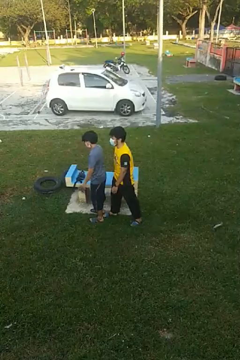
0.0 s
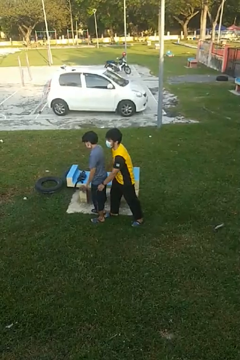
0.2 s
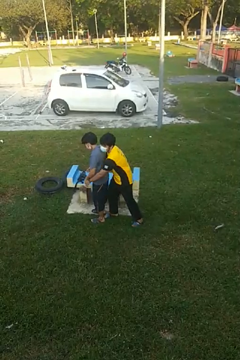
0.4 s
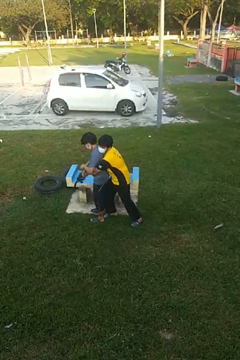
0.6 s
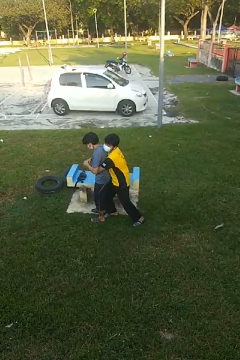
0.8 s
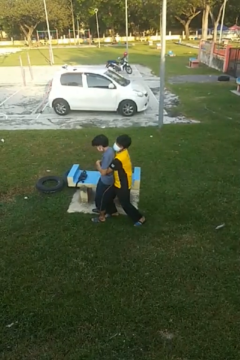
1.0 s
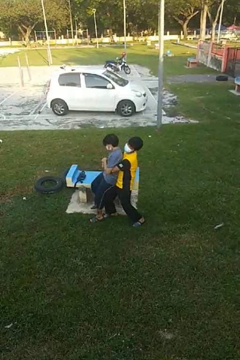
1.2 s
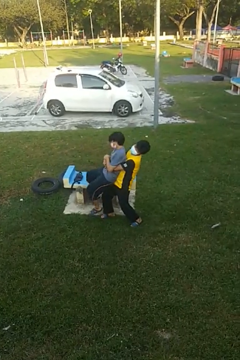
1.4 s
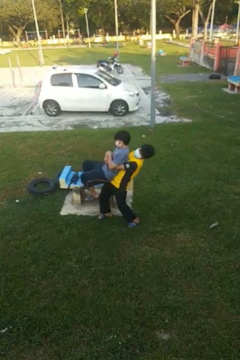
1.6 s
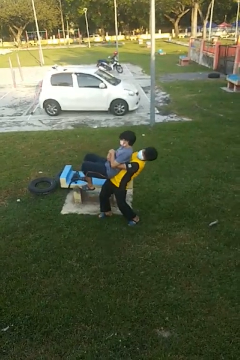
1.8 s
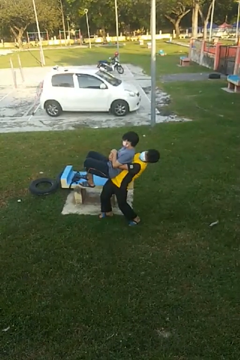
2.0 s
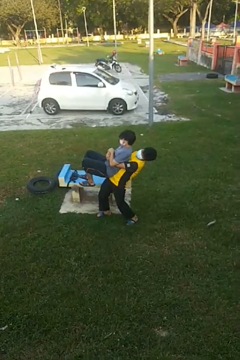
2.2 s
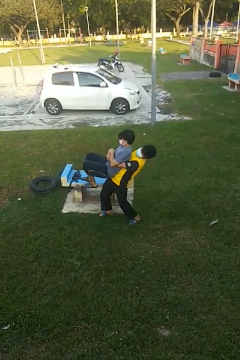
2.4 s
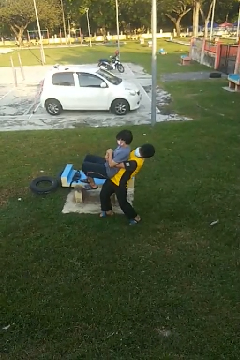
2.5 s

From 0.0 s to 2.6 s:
person picks up person

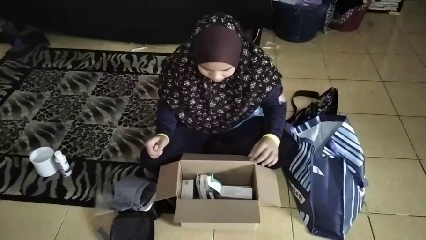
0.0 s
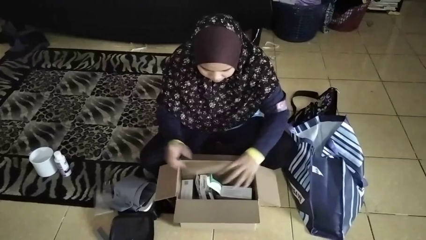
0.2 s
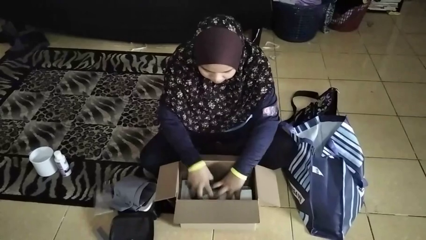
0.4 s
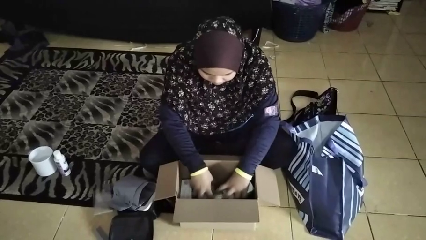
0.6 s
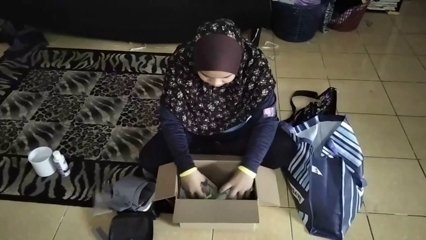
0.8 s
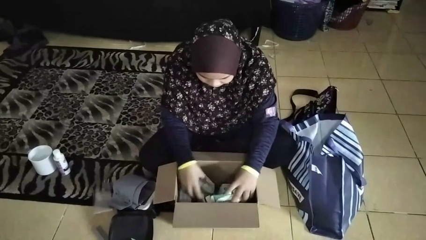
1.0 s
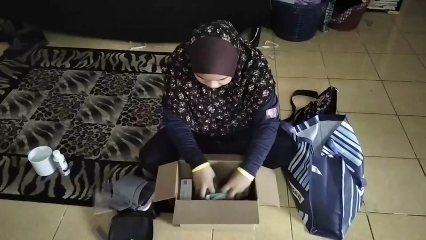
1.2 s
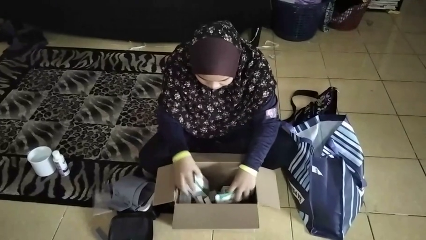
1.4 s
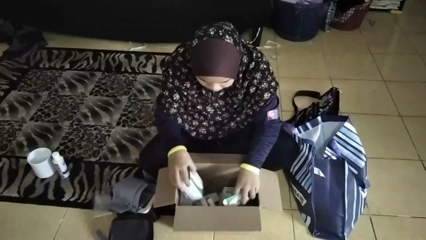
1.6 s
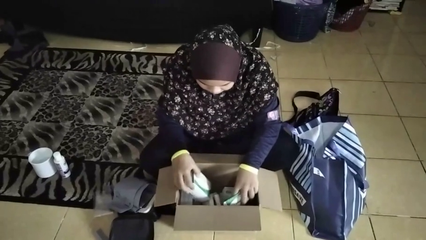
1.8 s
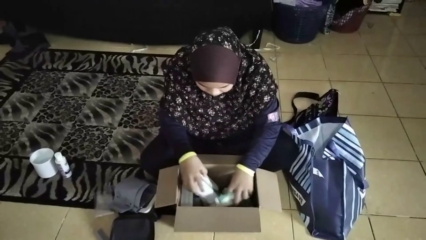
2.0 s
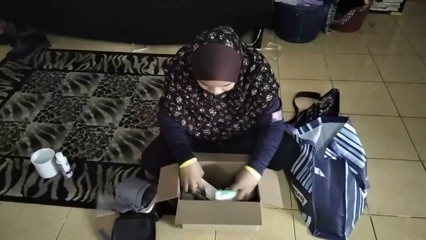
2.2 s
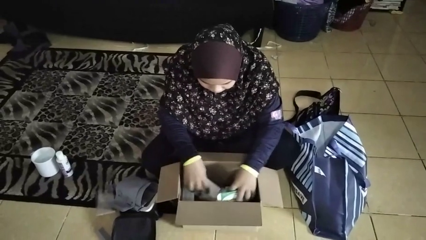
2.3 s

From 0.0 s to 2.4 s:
person searches in box

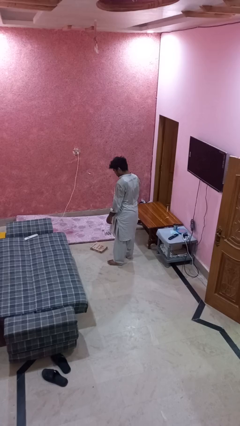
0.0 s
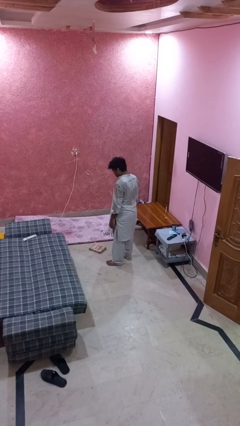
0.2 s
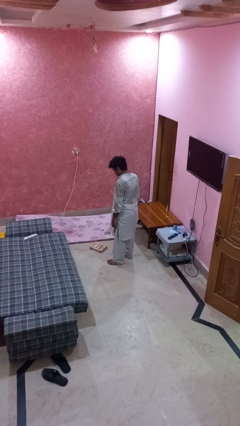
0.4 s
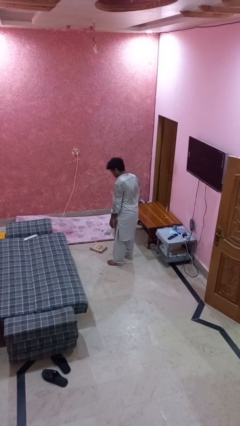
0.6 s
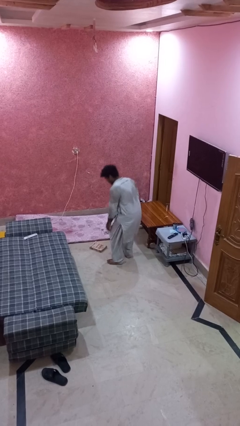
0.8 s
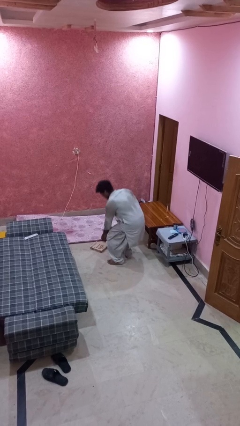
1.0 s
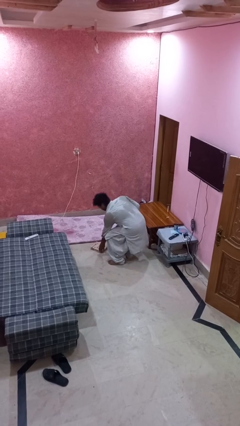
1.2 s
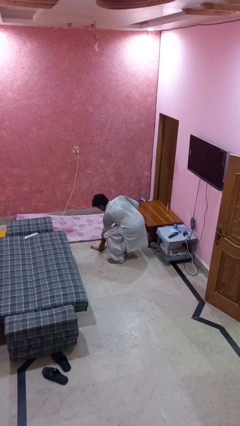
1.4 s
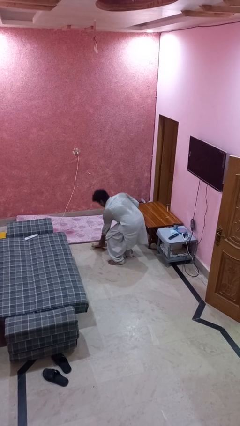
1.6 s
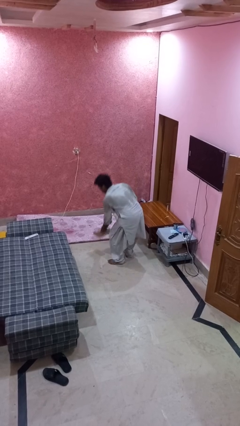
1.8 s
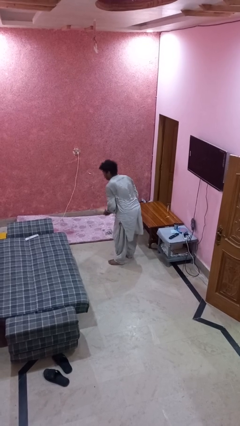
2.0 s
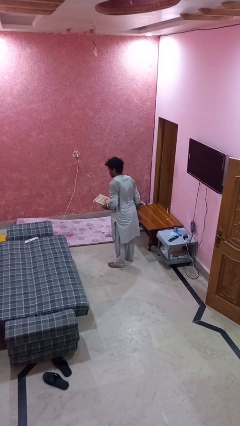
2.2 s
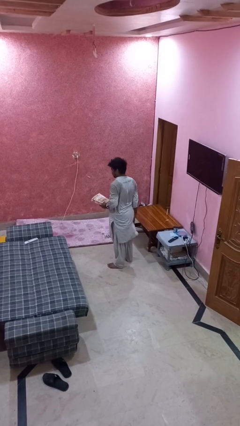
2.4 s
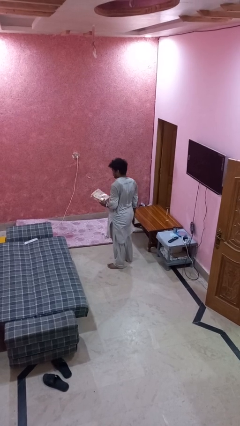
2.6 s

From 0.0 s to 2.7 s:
person picks up object from floor

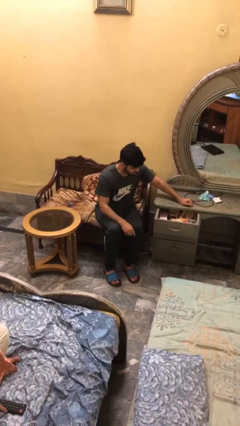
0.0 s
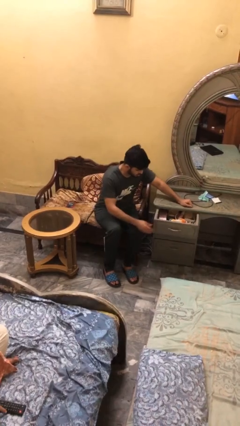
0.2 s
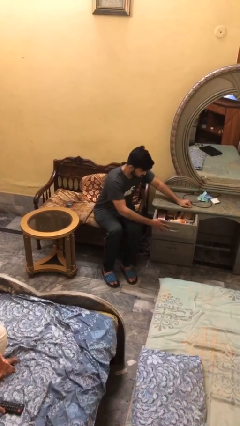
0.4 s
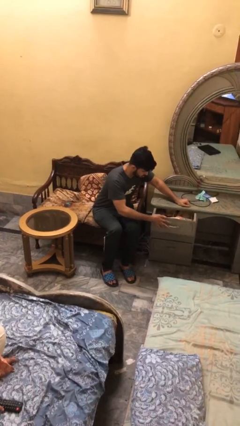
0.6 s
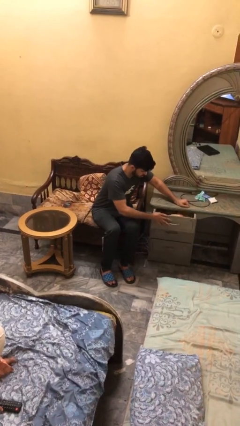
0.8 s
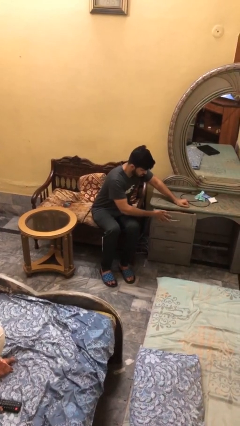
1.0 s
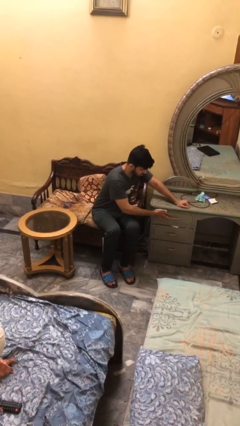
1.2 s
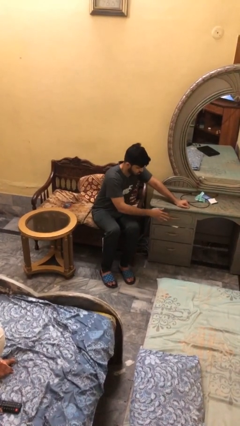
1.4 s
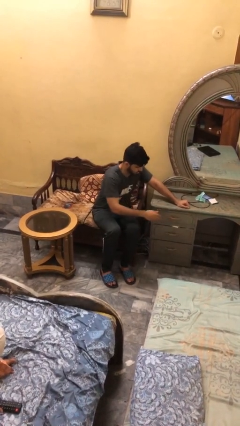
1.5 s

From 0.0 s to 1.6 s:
person closes dresser drawer

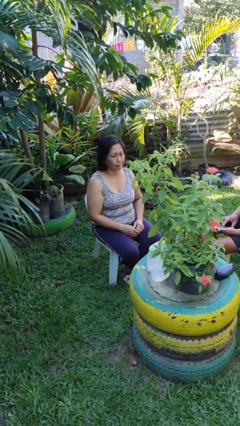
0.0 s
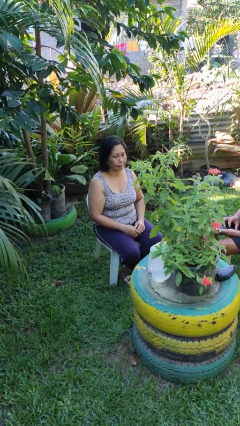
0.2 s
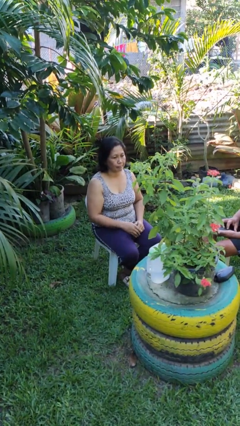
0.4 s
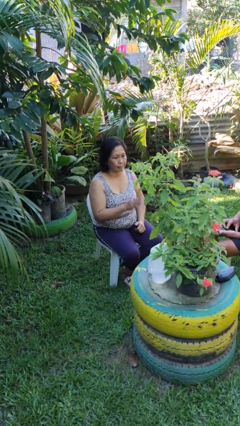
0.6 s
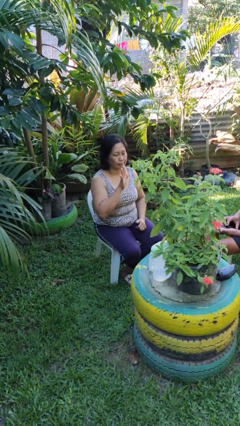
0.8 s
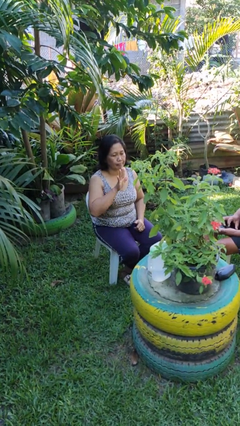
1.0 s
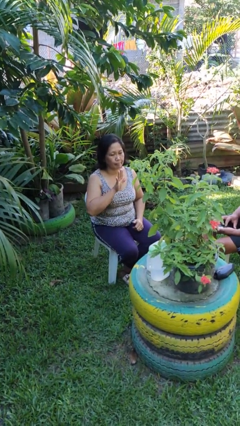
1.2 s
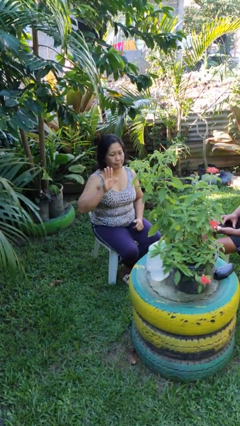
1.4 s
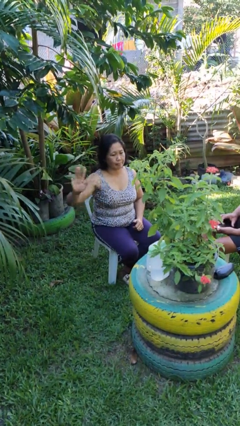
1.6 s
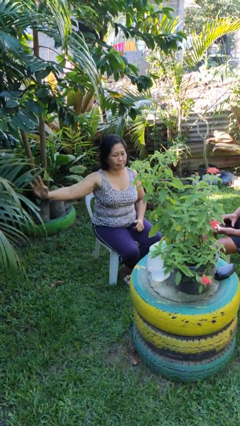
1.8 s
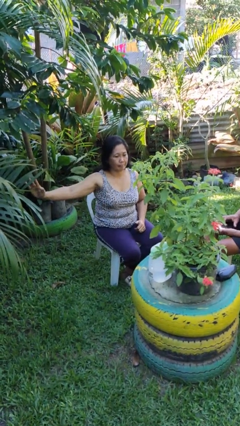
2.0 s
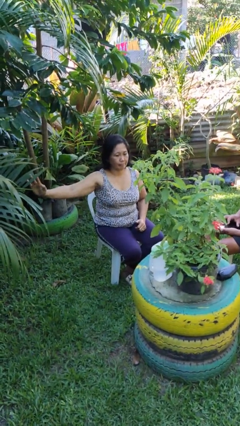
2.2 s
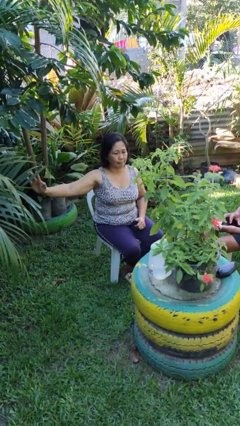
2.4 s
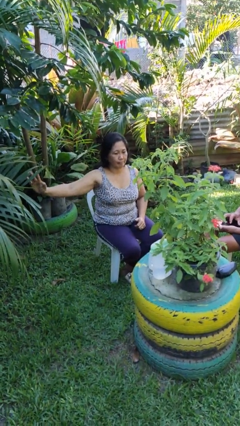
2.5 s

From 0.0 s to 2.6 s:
person gestures swipe right

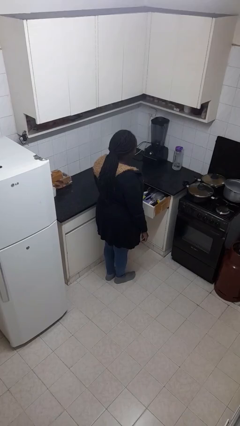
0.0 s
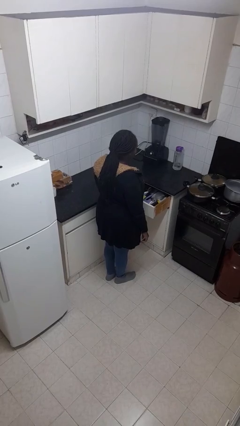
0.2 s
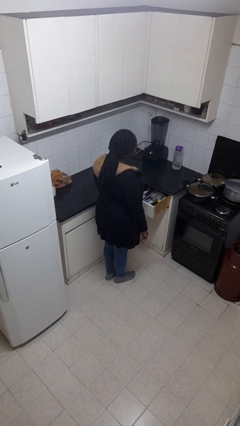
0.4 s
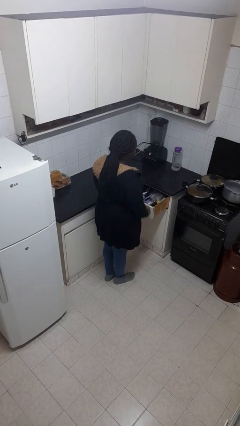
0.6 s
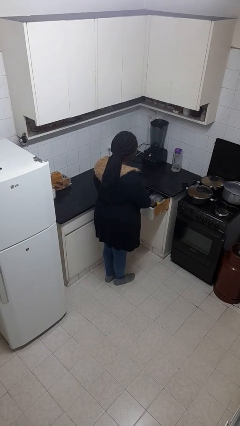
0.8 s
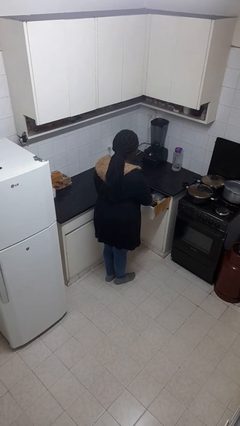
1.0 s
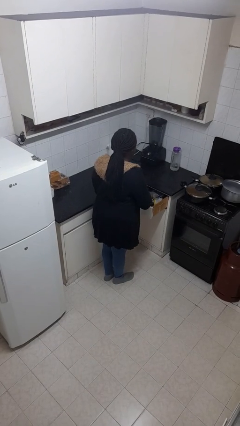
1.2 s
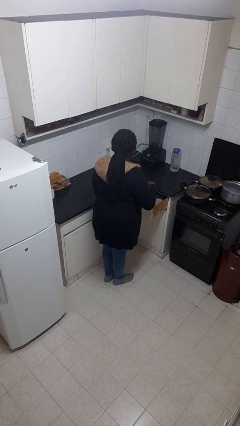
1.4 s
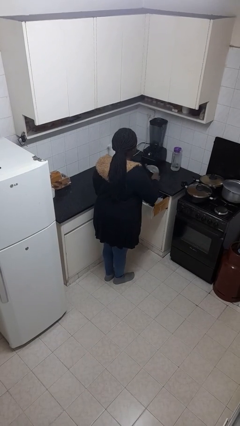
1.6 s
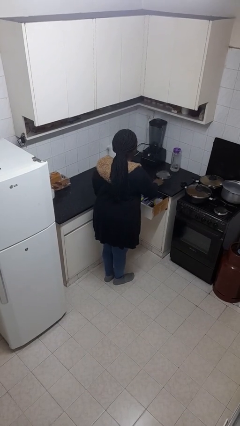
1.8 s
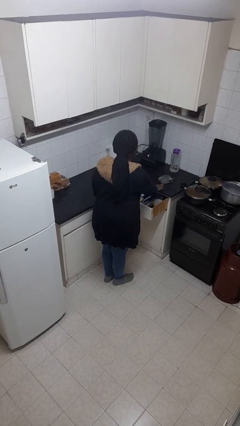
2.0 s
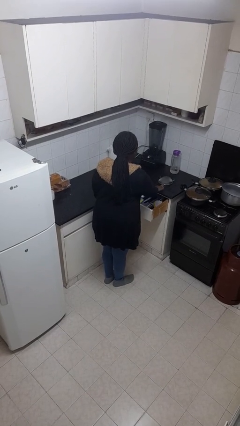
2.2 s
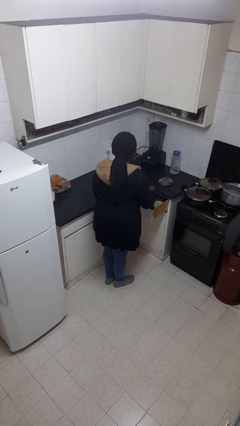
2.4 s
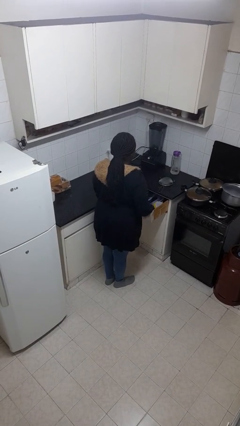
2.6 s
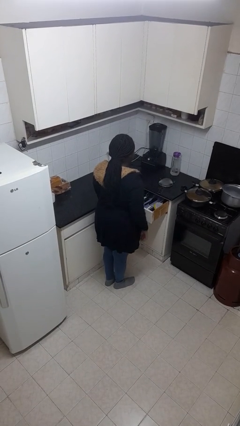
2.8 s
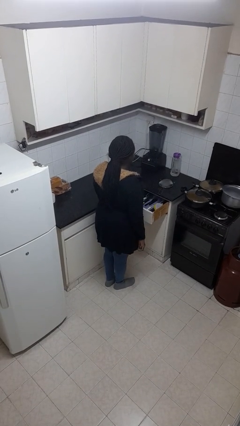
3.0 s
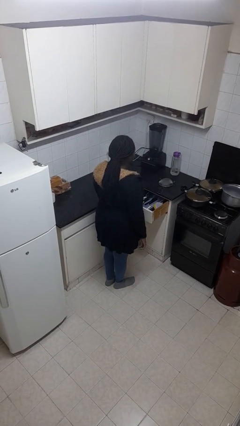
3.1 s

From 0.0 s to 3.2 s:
person takes object from kitchen drawer

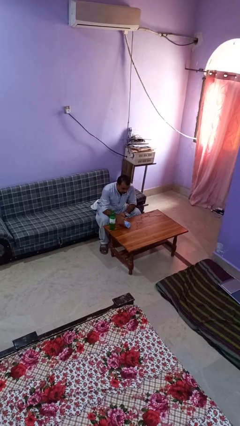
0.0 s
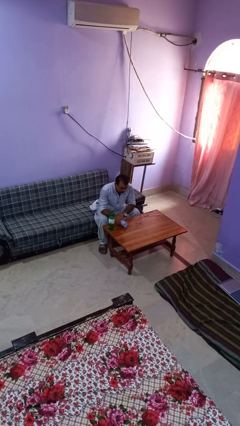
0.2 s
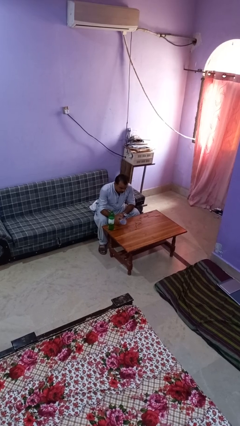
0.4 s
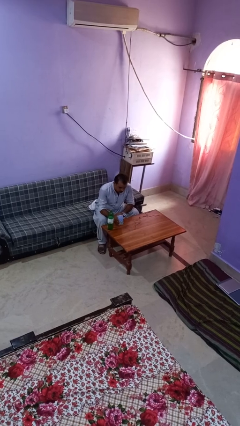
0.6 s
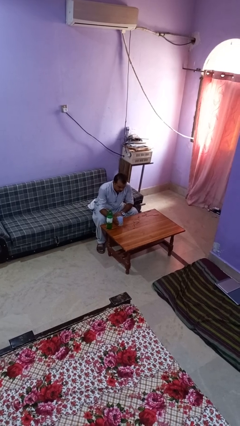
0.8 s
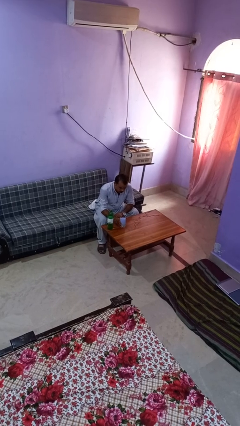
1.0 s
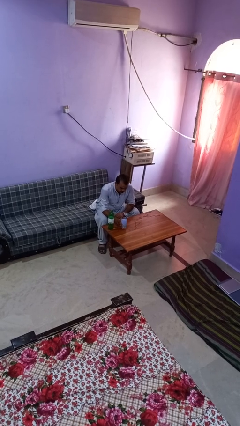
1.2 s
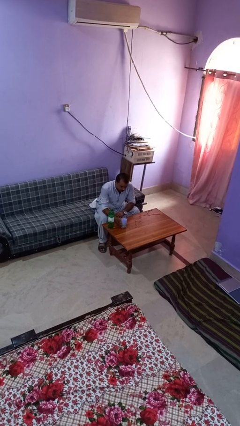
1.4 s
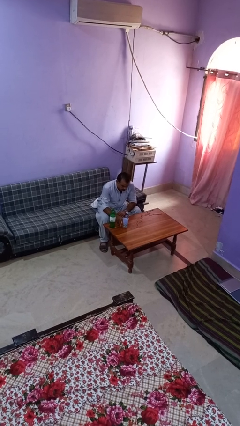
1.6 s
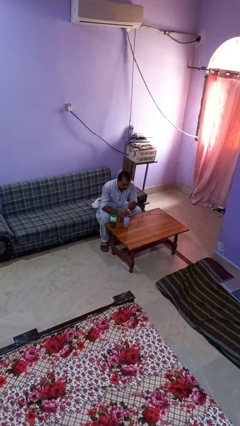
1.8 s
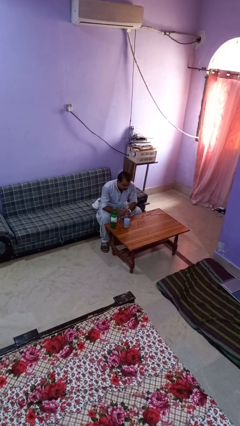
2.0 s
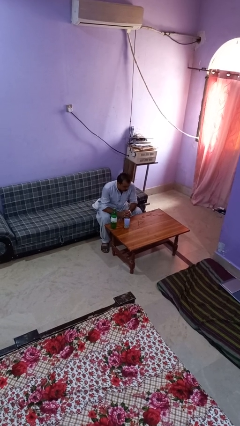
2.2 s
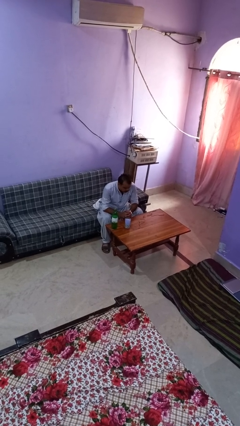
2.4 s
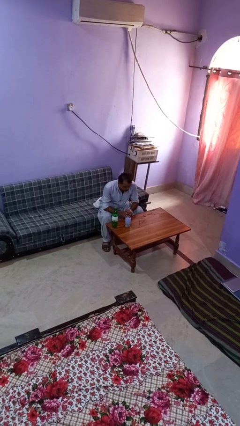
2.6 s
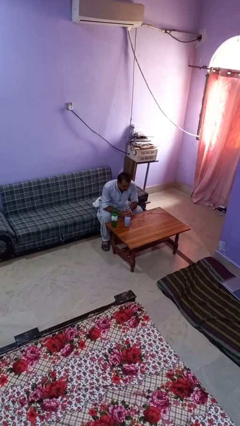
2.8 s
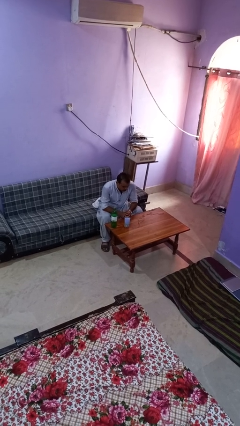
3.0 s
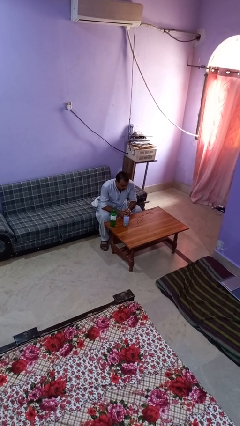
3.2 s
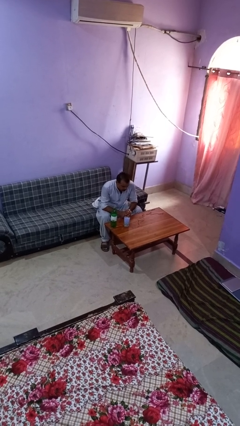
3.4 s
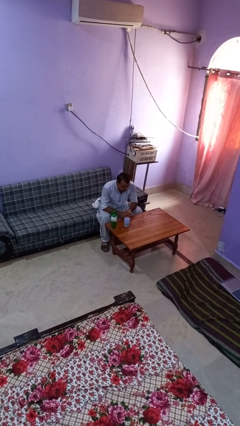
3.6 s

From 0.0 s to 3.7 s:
person sets upright glass
